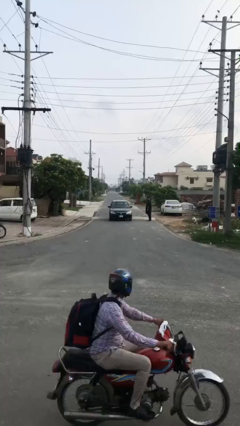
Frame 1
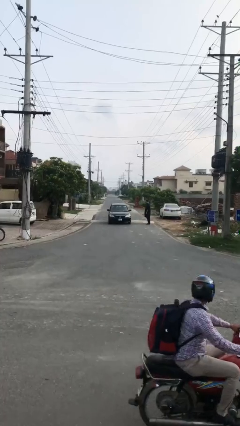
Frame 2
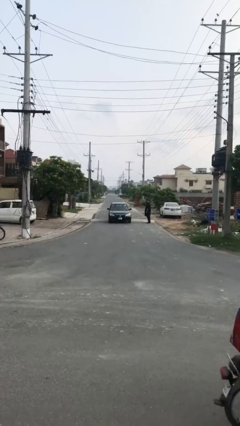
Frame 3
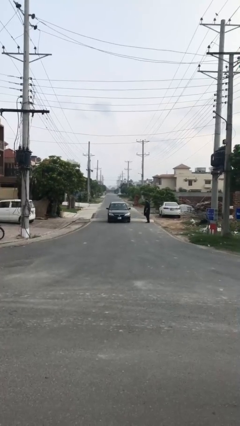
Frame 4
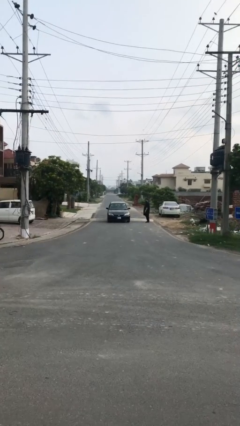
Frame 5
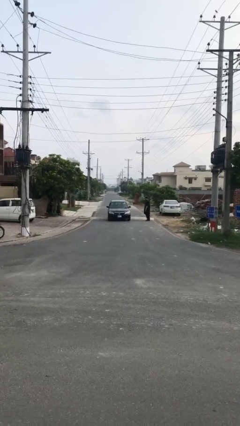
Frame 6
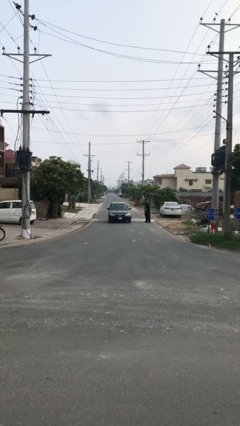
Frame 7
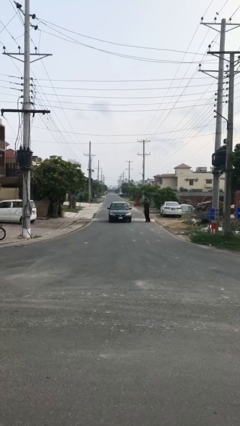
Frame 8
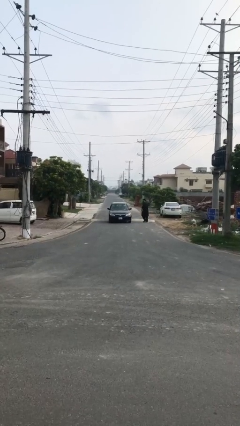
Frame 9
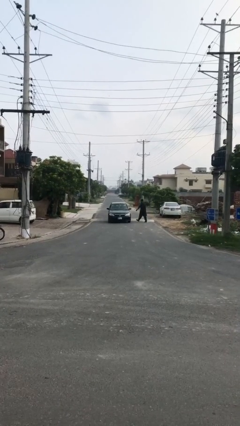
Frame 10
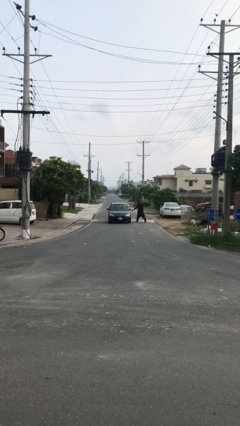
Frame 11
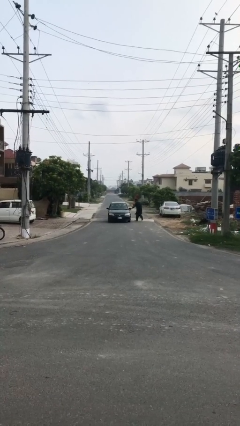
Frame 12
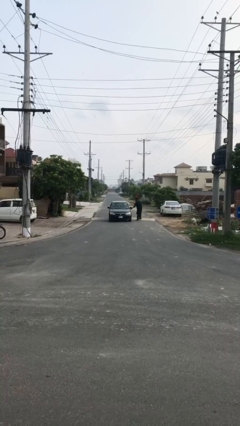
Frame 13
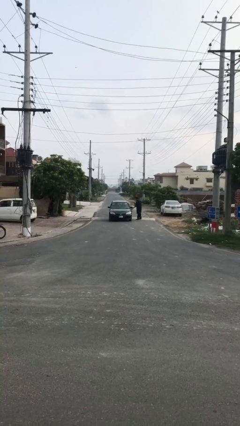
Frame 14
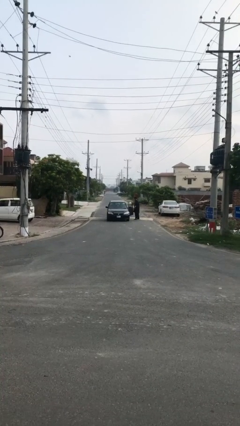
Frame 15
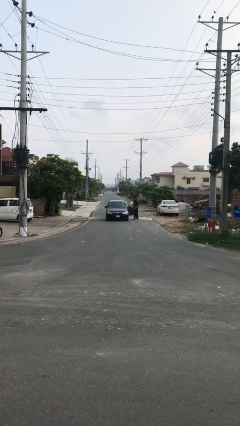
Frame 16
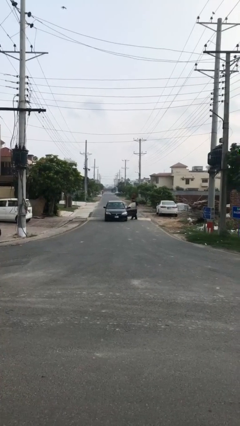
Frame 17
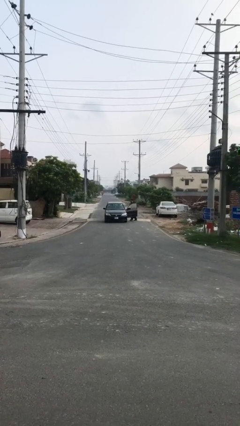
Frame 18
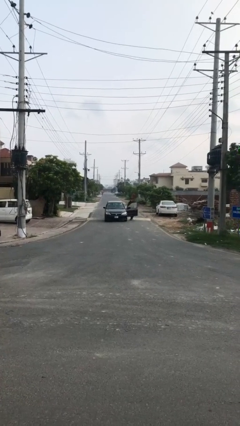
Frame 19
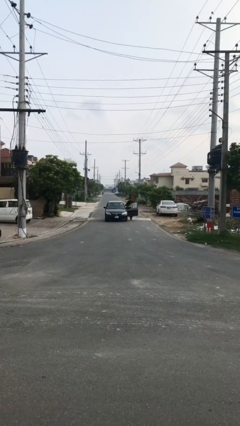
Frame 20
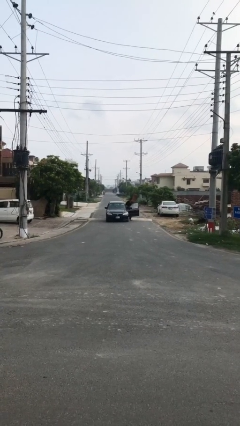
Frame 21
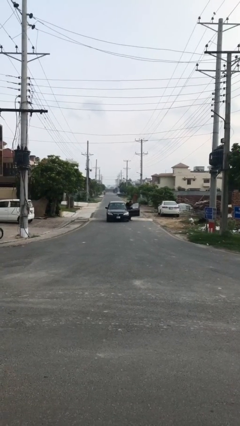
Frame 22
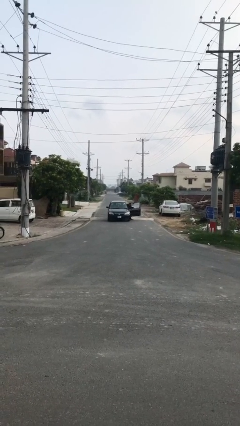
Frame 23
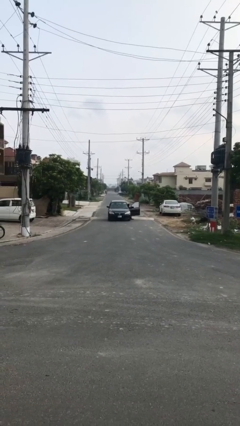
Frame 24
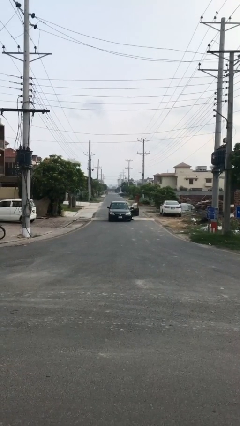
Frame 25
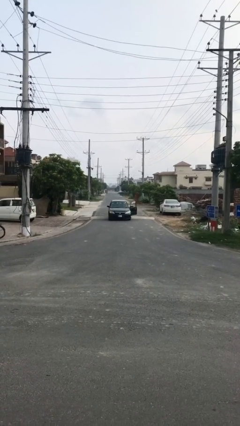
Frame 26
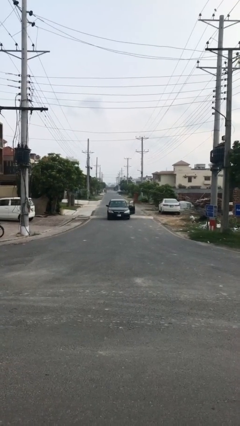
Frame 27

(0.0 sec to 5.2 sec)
car picks up person

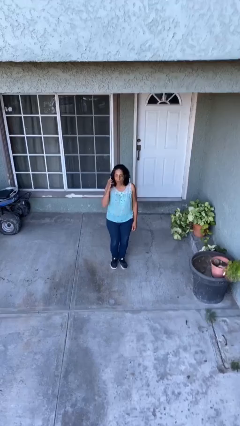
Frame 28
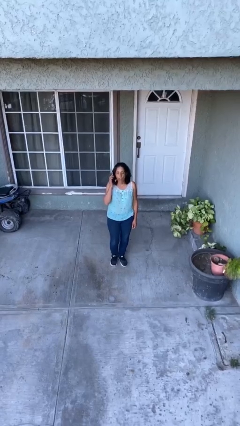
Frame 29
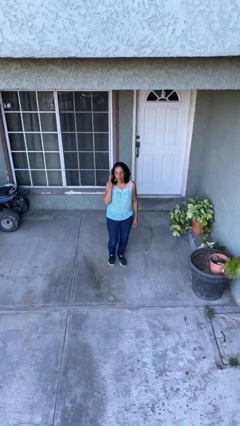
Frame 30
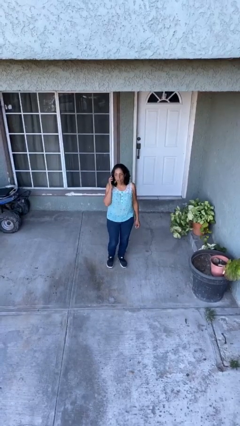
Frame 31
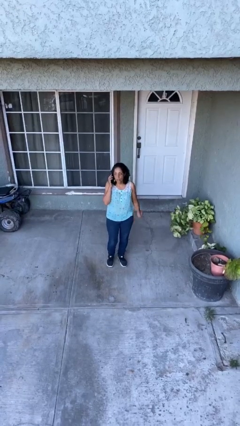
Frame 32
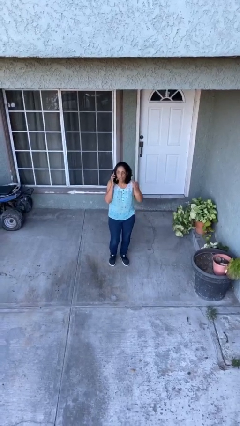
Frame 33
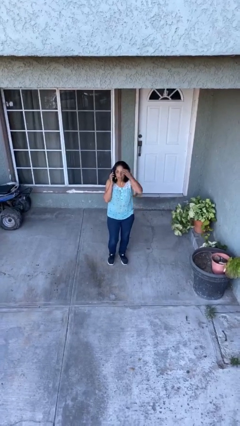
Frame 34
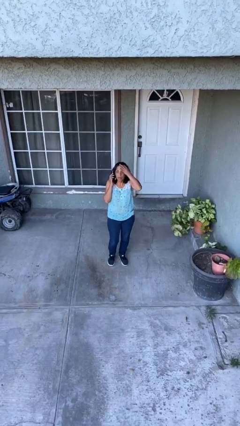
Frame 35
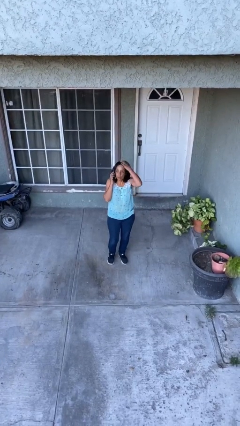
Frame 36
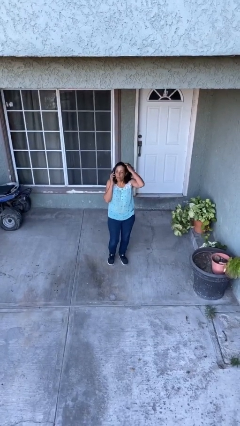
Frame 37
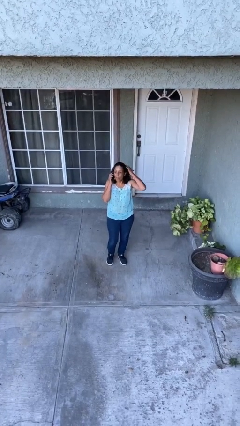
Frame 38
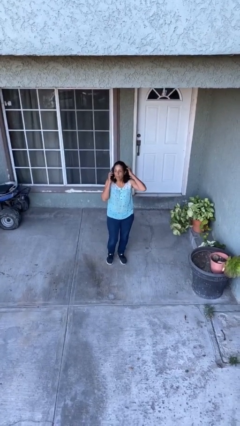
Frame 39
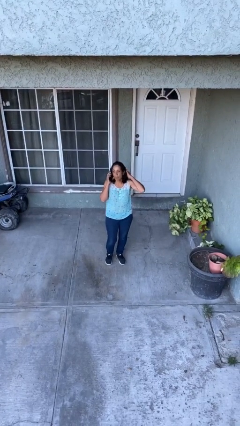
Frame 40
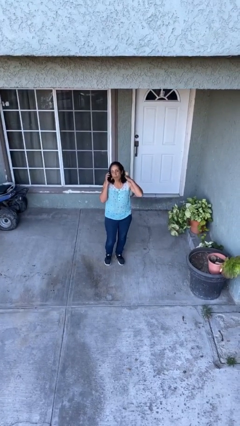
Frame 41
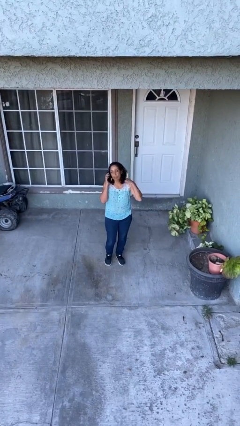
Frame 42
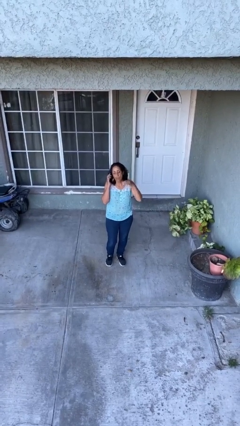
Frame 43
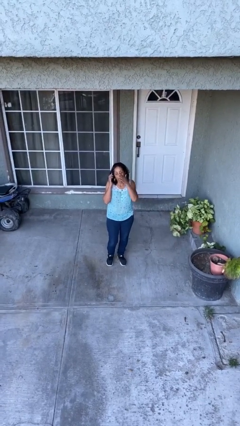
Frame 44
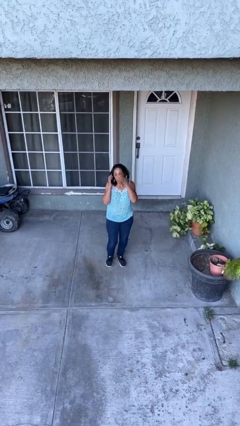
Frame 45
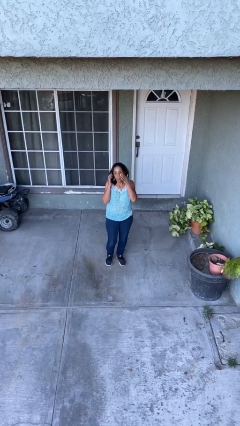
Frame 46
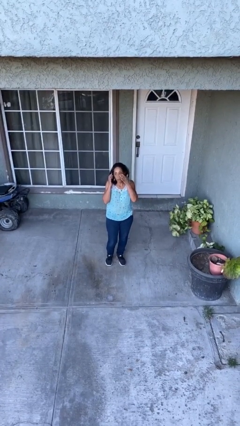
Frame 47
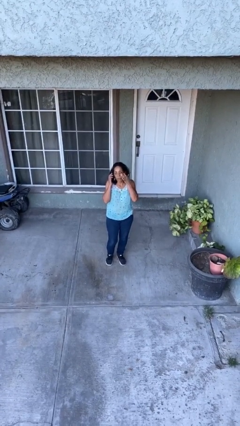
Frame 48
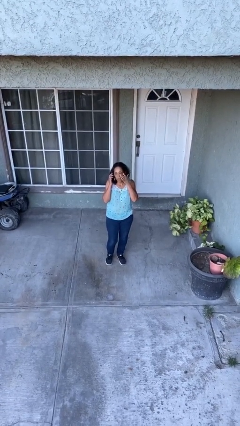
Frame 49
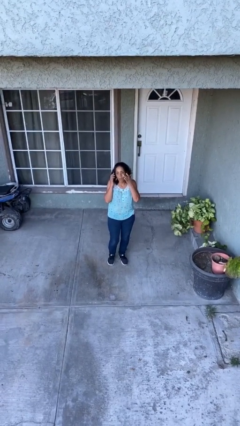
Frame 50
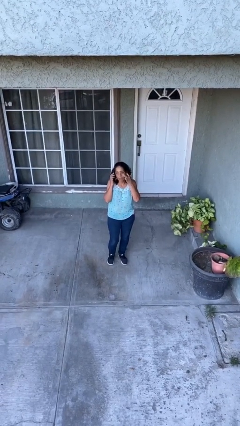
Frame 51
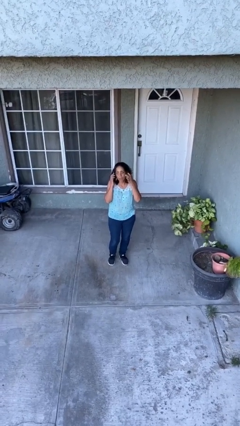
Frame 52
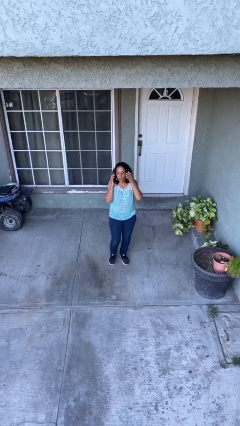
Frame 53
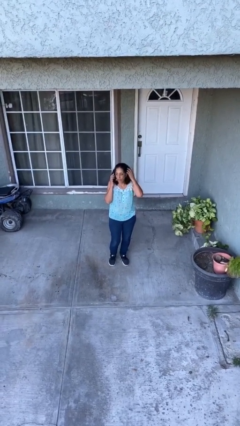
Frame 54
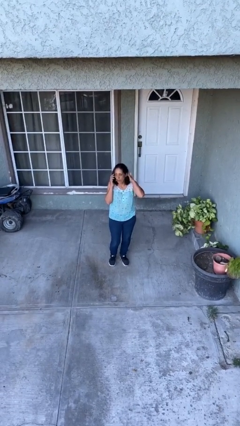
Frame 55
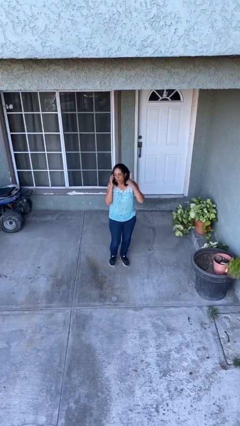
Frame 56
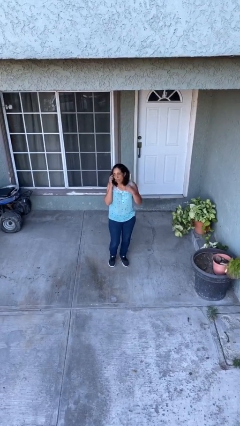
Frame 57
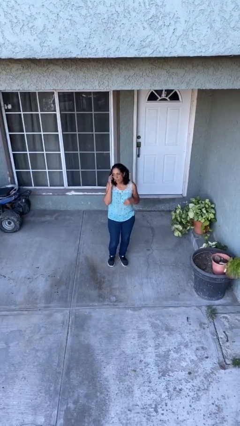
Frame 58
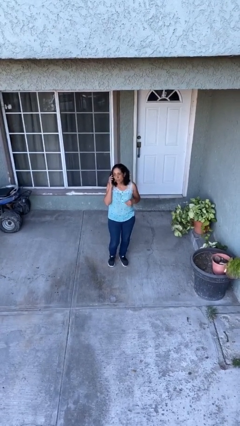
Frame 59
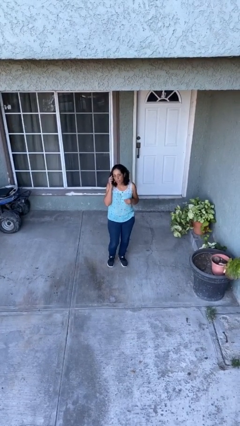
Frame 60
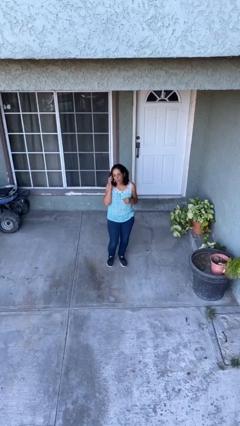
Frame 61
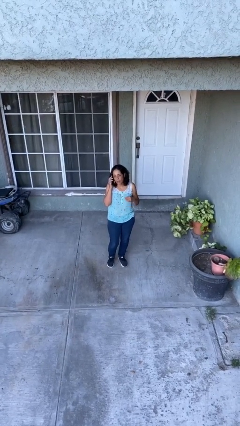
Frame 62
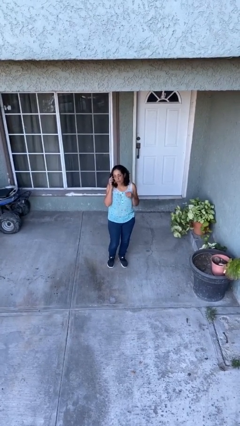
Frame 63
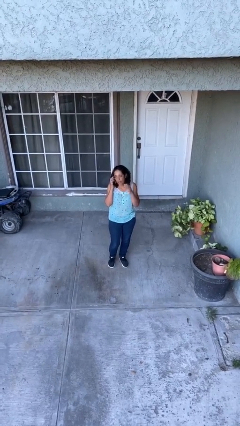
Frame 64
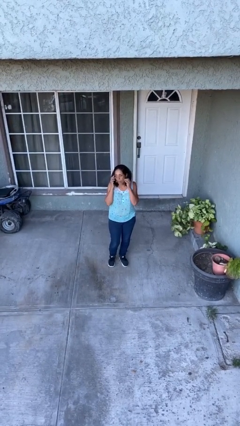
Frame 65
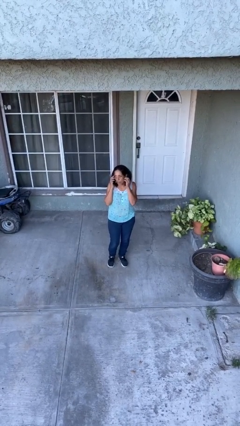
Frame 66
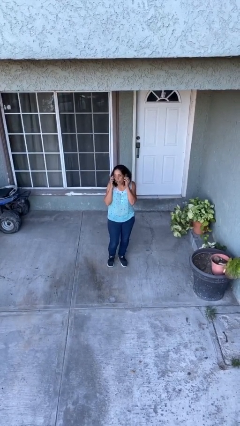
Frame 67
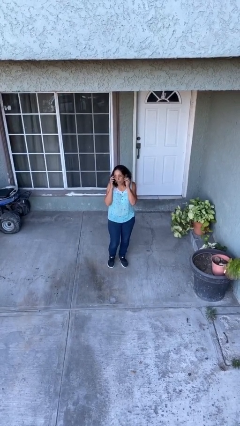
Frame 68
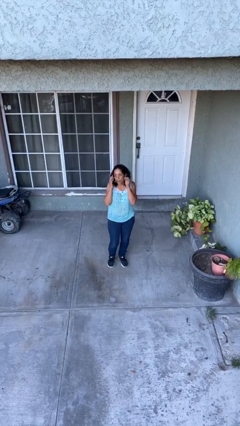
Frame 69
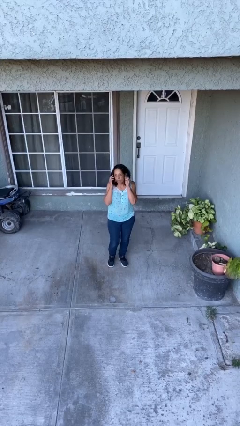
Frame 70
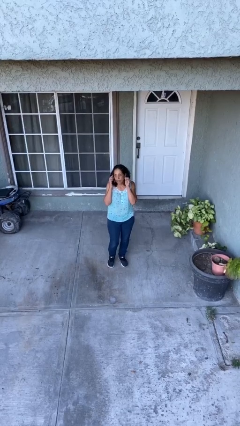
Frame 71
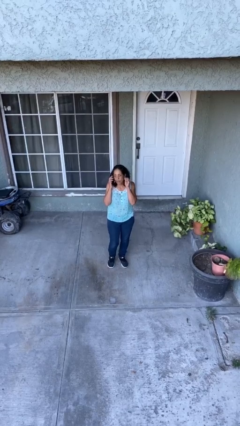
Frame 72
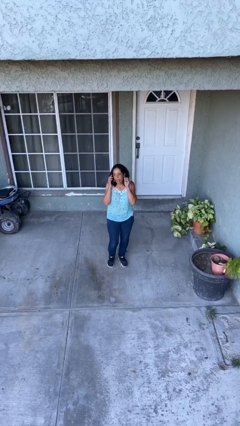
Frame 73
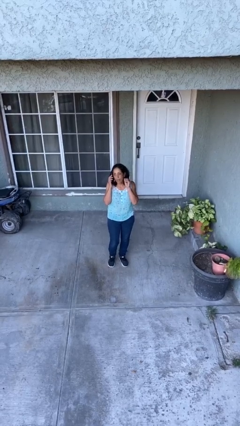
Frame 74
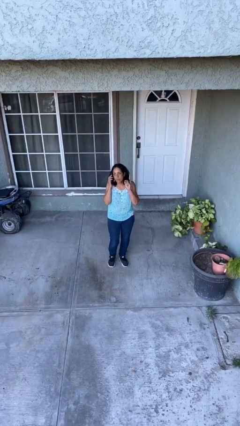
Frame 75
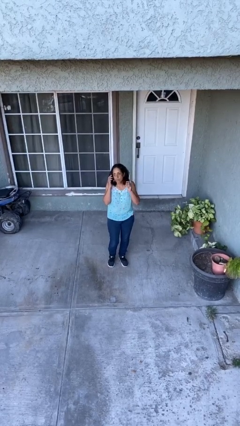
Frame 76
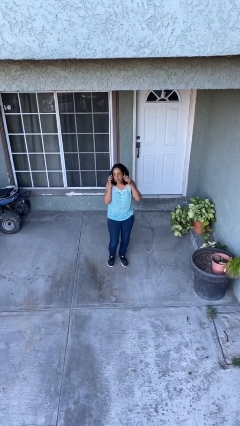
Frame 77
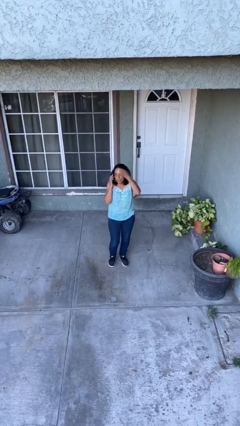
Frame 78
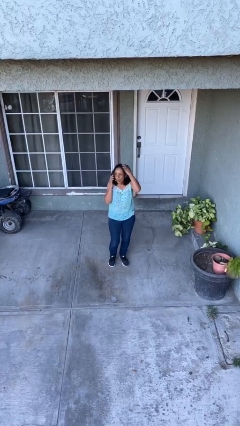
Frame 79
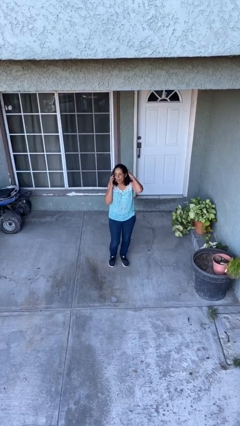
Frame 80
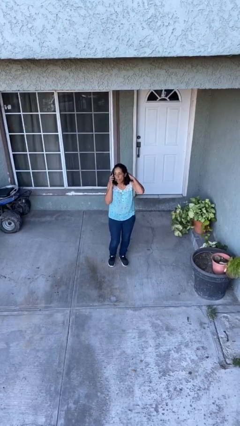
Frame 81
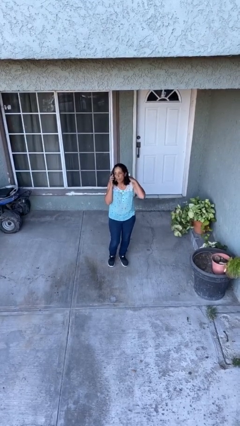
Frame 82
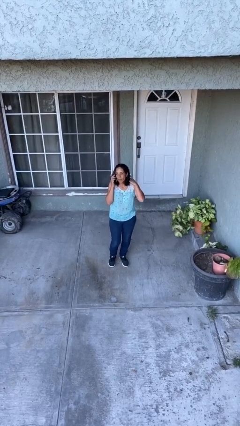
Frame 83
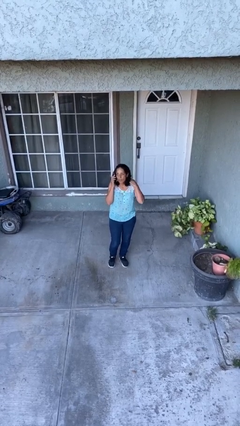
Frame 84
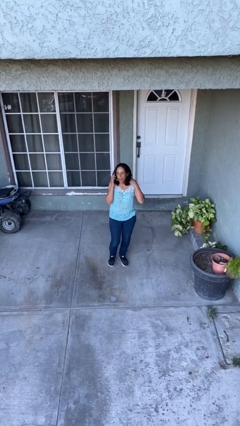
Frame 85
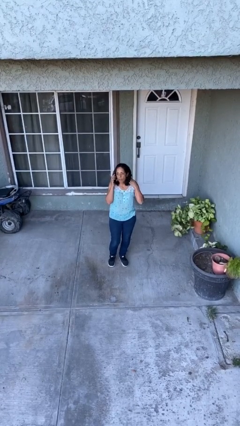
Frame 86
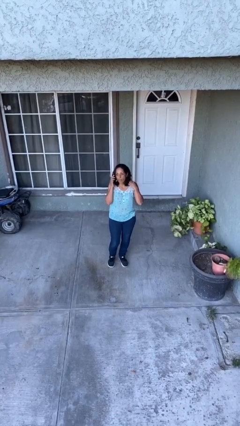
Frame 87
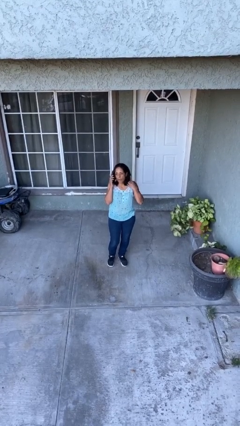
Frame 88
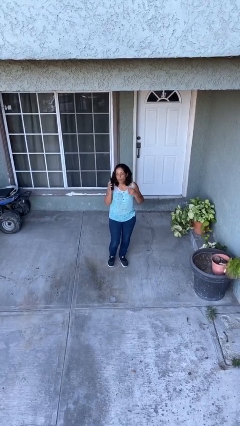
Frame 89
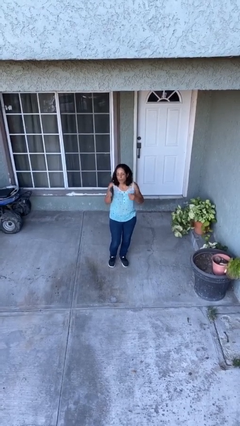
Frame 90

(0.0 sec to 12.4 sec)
person talks on phone

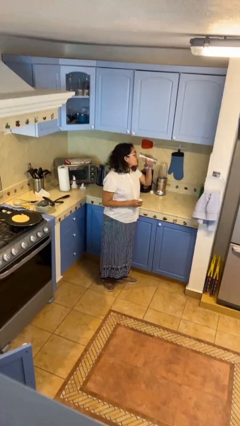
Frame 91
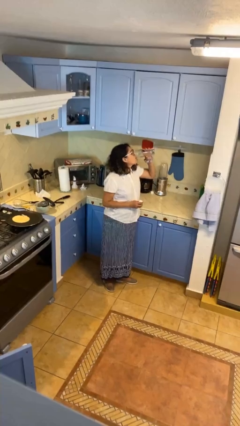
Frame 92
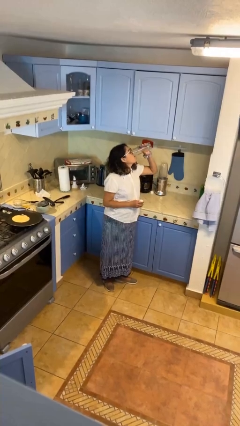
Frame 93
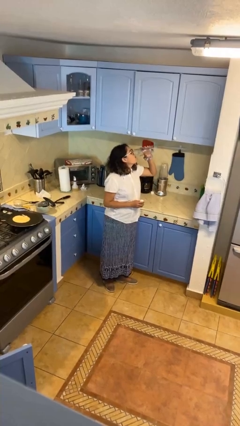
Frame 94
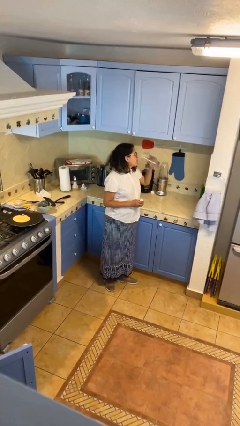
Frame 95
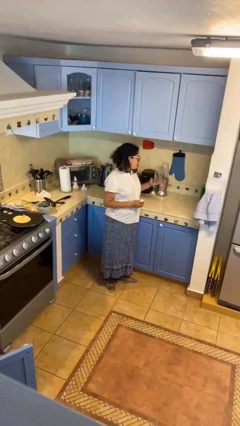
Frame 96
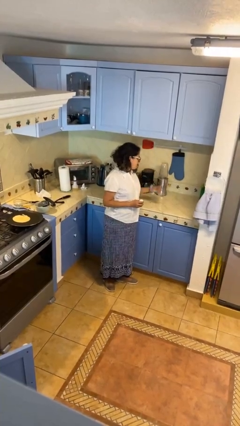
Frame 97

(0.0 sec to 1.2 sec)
person drinks from cup
